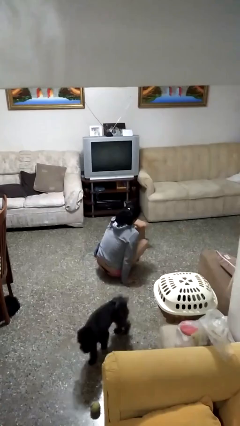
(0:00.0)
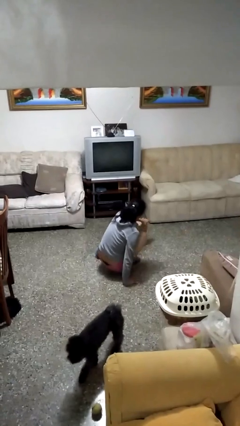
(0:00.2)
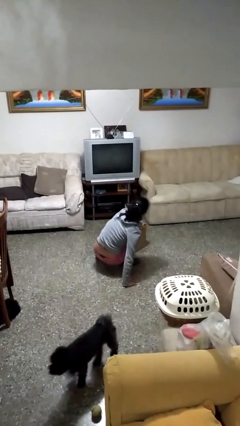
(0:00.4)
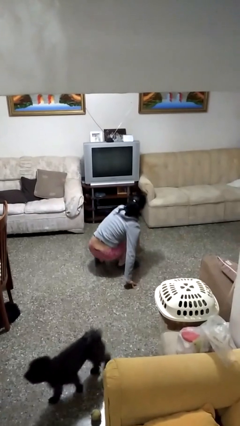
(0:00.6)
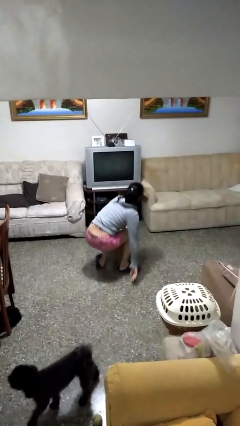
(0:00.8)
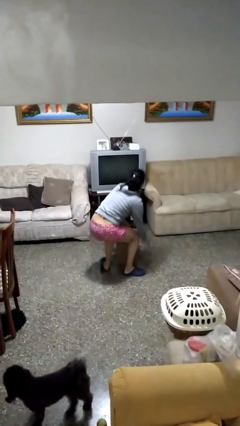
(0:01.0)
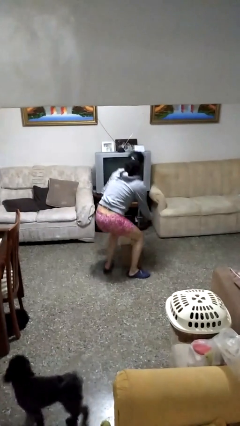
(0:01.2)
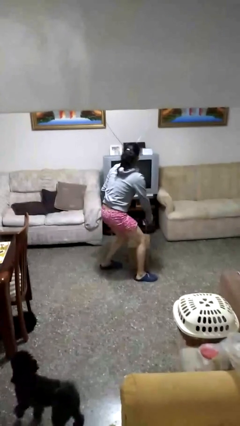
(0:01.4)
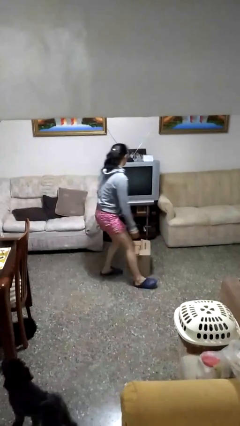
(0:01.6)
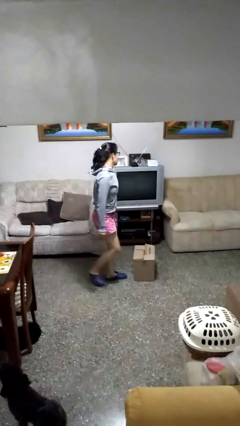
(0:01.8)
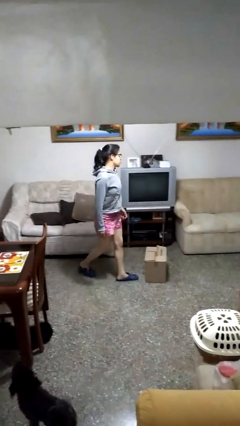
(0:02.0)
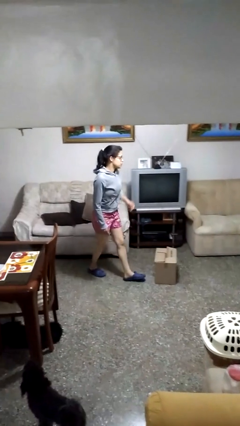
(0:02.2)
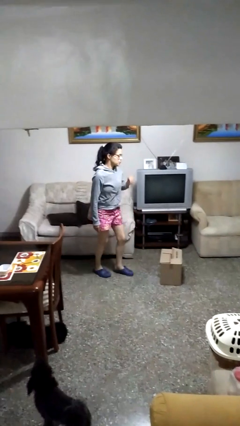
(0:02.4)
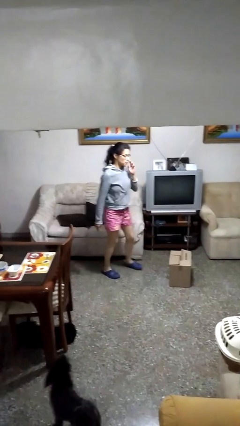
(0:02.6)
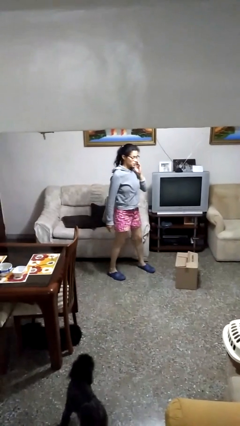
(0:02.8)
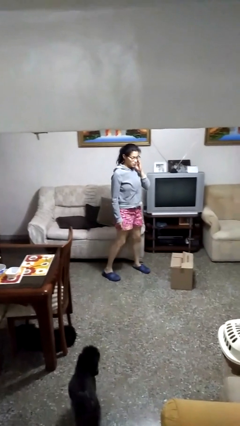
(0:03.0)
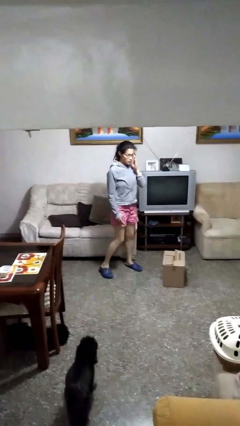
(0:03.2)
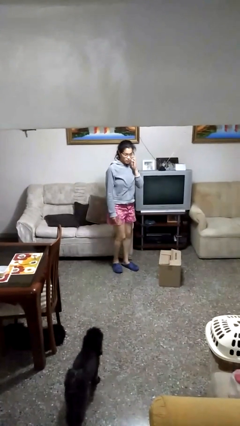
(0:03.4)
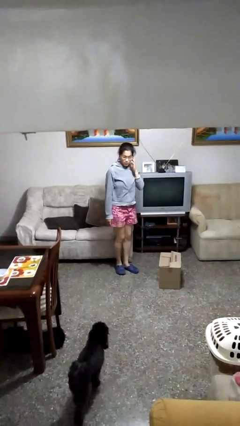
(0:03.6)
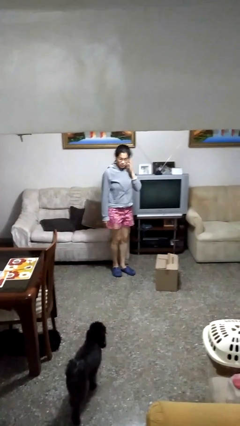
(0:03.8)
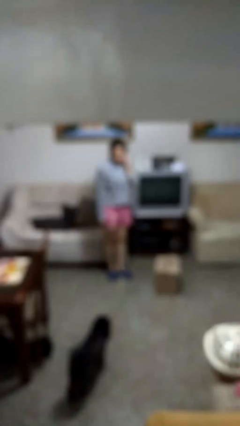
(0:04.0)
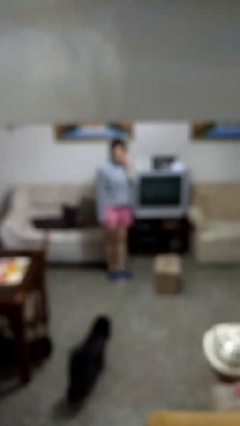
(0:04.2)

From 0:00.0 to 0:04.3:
person stands up from floor

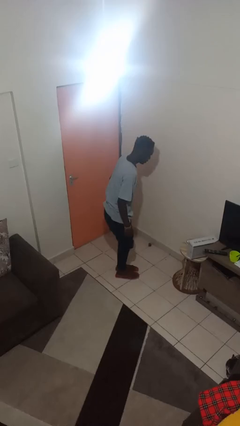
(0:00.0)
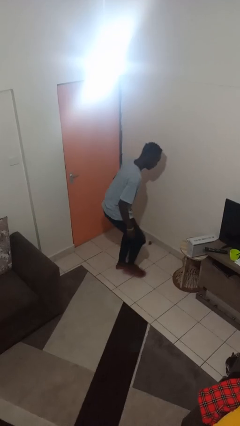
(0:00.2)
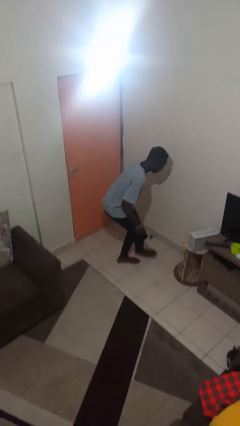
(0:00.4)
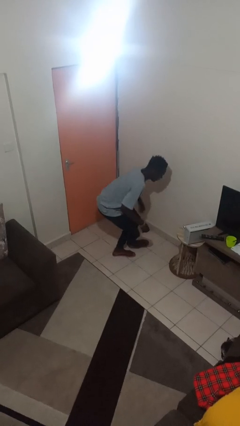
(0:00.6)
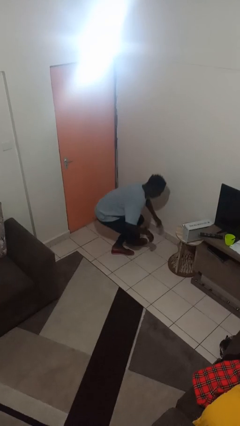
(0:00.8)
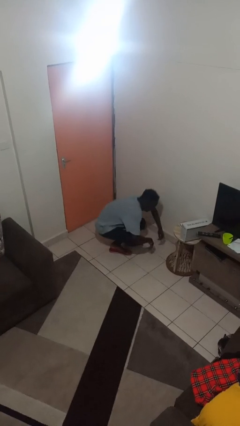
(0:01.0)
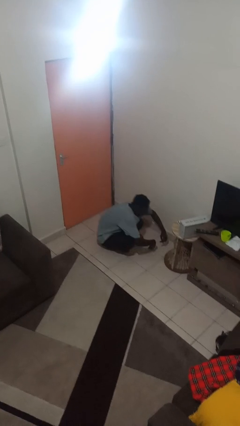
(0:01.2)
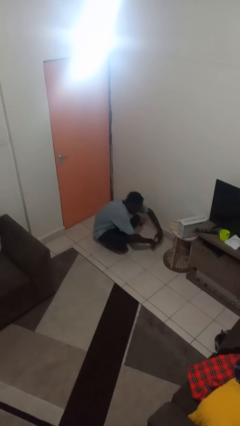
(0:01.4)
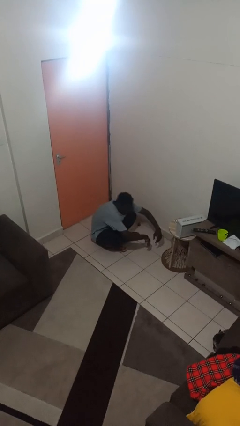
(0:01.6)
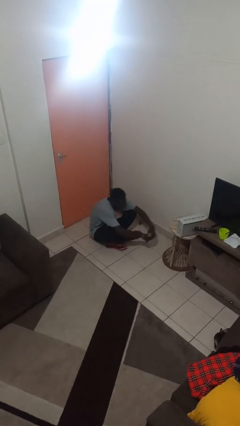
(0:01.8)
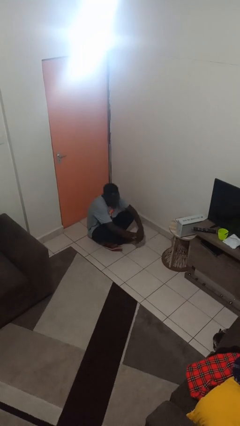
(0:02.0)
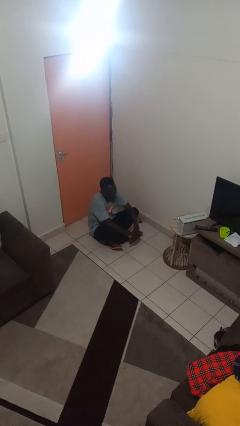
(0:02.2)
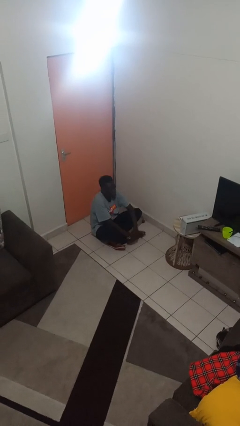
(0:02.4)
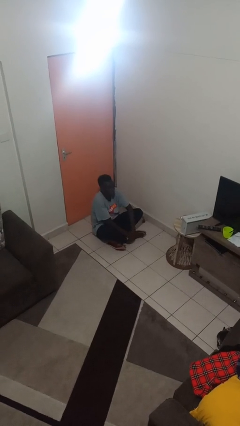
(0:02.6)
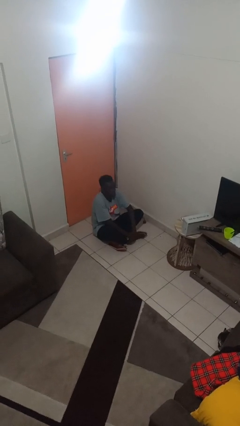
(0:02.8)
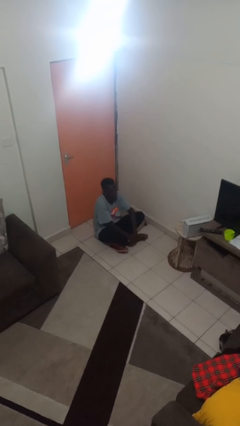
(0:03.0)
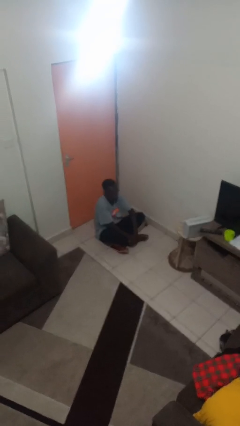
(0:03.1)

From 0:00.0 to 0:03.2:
person sits crisscross

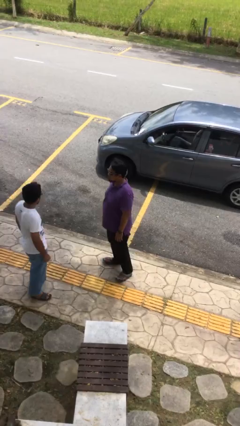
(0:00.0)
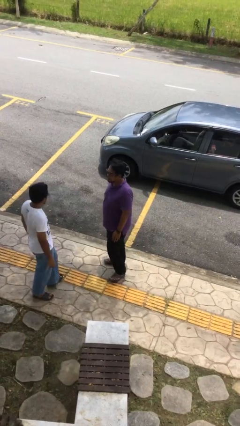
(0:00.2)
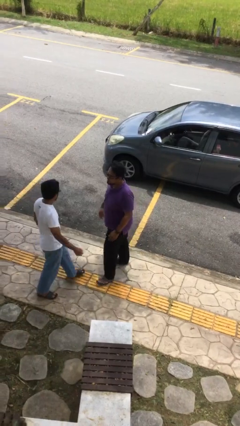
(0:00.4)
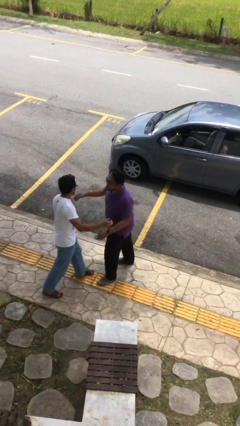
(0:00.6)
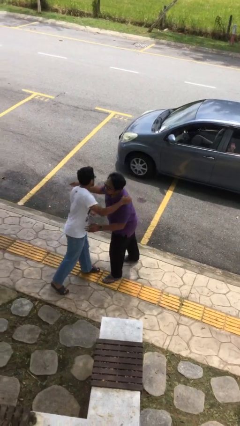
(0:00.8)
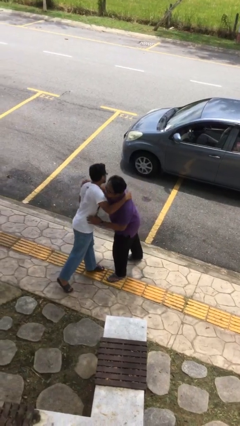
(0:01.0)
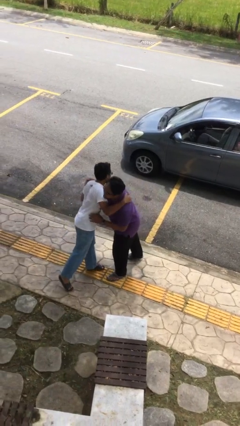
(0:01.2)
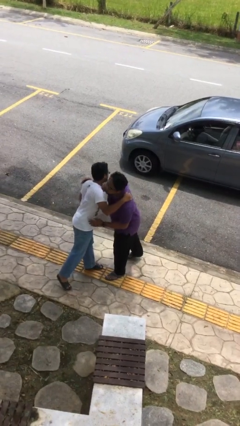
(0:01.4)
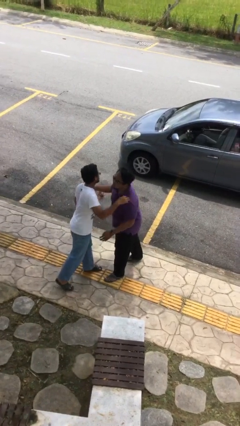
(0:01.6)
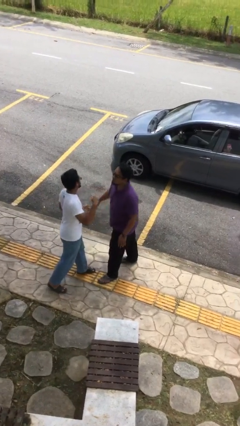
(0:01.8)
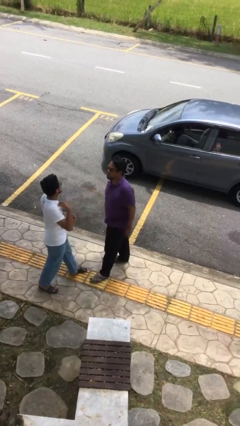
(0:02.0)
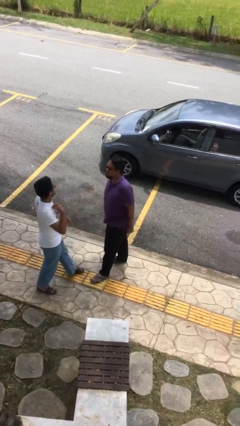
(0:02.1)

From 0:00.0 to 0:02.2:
person embraces person

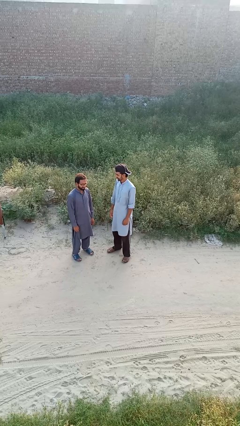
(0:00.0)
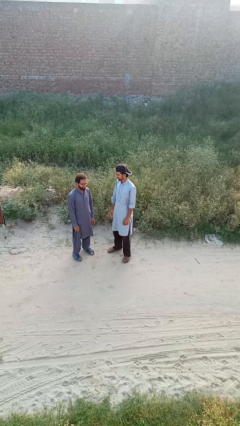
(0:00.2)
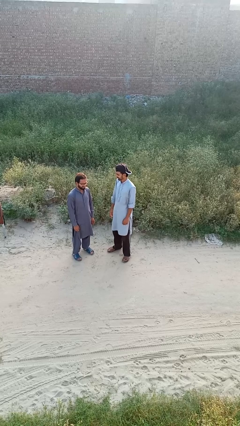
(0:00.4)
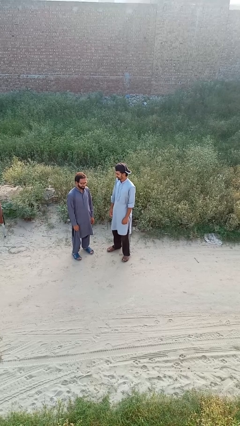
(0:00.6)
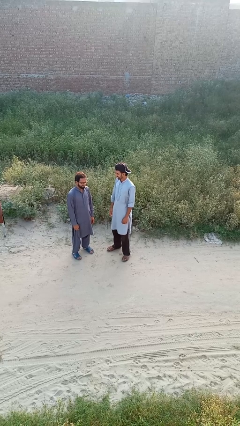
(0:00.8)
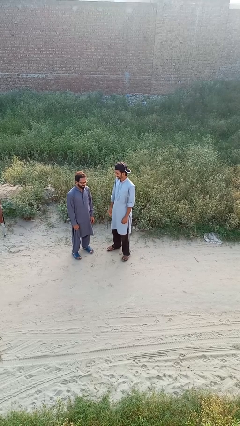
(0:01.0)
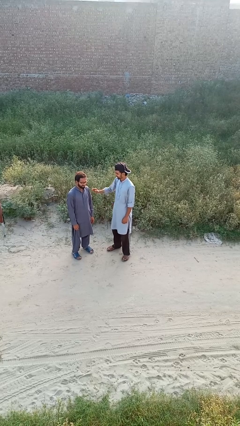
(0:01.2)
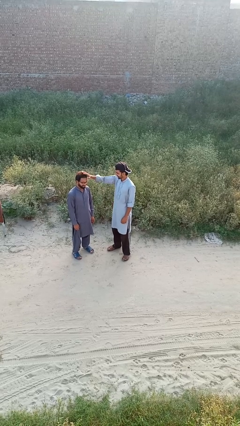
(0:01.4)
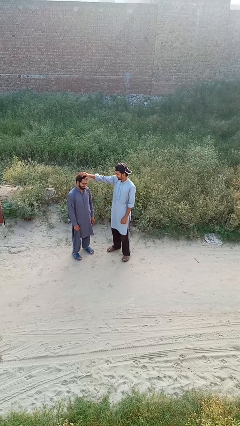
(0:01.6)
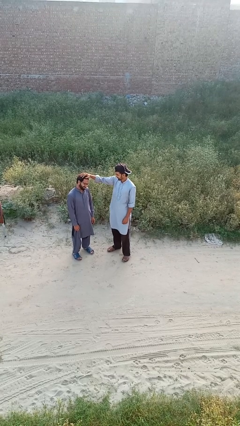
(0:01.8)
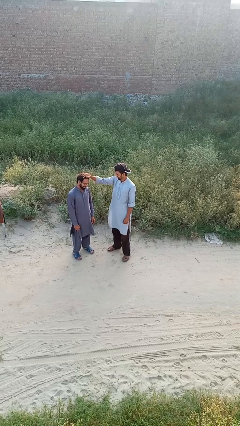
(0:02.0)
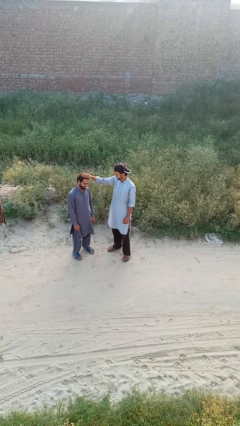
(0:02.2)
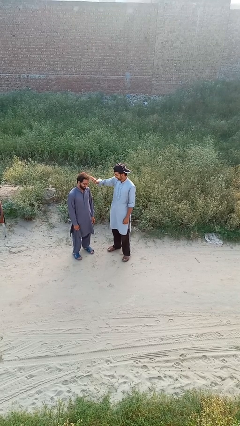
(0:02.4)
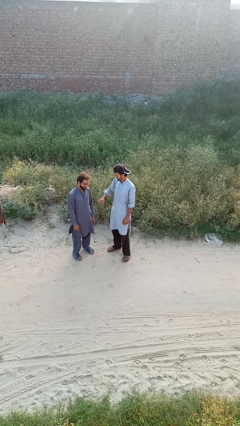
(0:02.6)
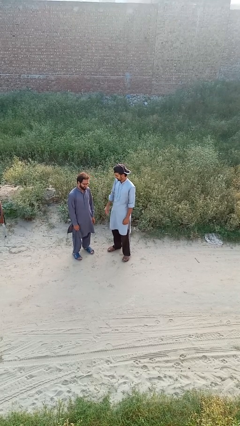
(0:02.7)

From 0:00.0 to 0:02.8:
person grabs person by hair

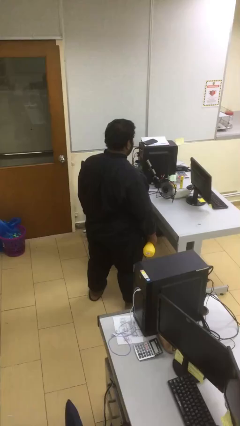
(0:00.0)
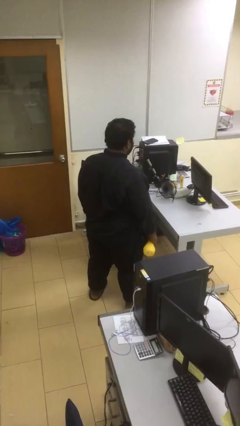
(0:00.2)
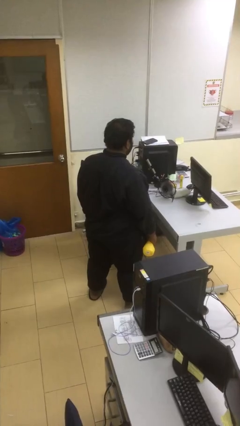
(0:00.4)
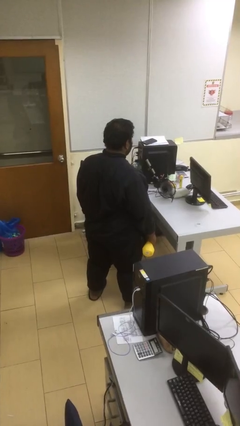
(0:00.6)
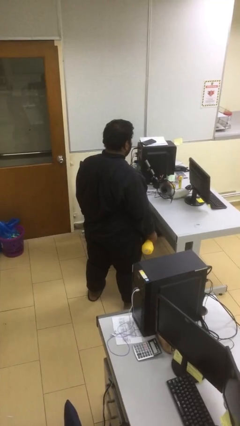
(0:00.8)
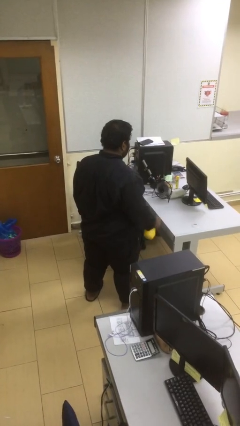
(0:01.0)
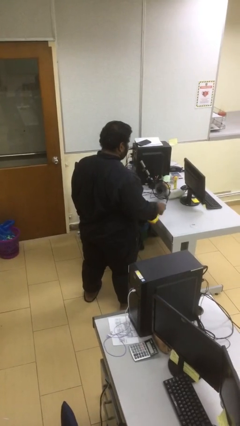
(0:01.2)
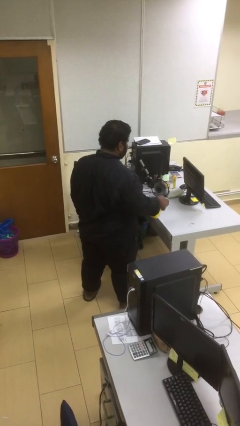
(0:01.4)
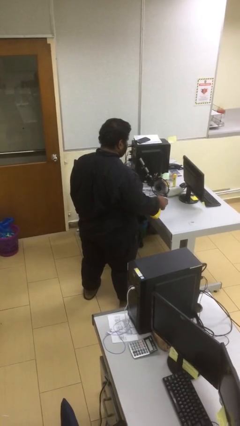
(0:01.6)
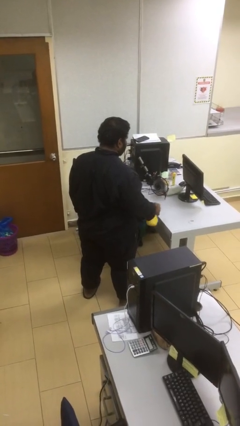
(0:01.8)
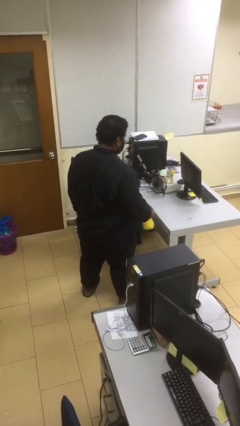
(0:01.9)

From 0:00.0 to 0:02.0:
person sprays from bottle

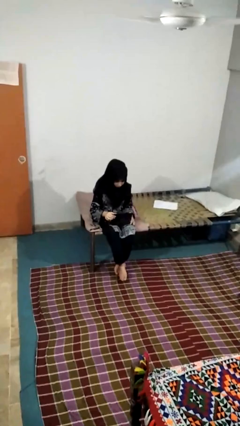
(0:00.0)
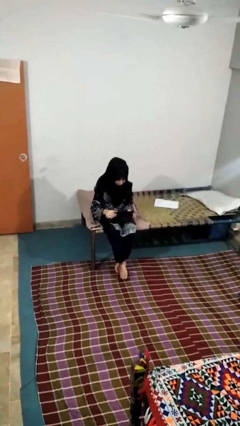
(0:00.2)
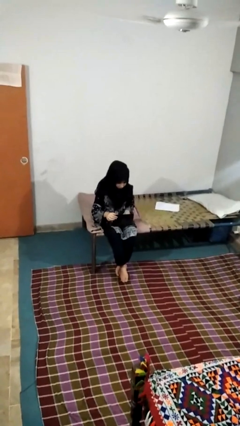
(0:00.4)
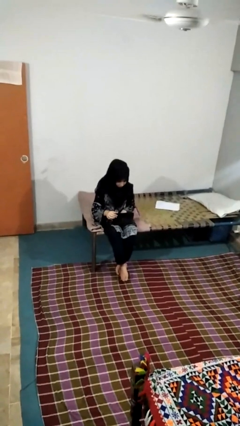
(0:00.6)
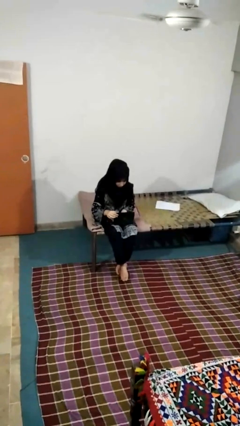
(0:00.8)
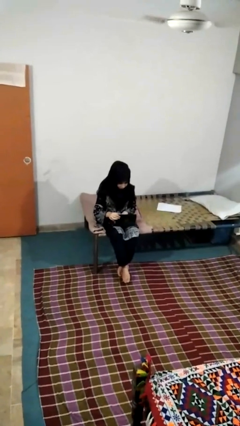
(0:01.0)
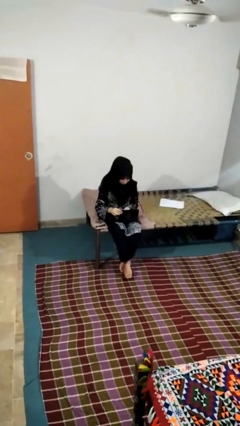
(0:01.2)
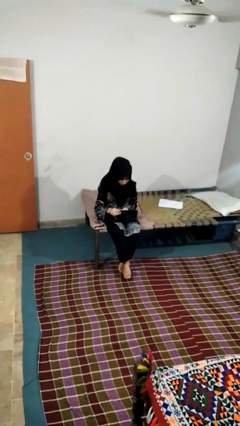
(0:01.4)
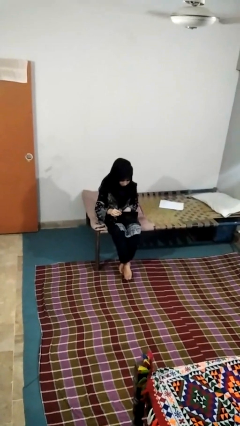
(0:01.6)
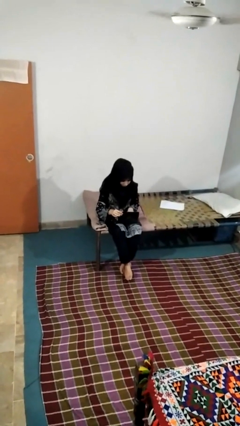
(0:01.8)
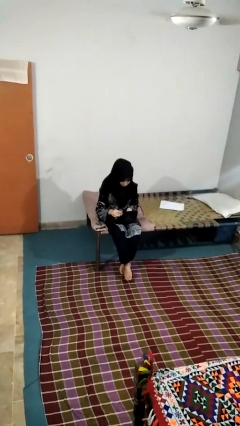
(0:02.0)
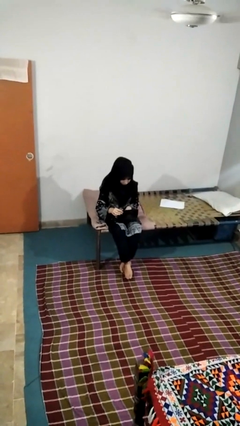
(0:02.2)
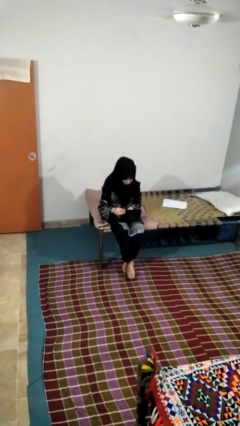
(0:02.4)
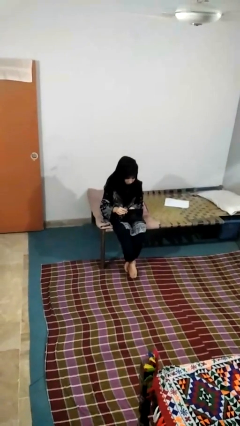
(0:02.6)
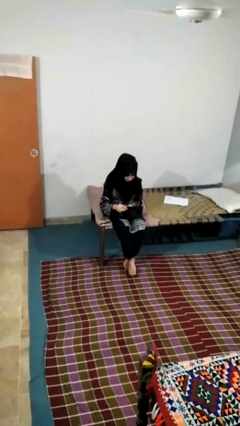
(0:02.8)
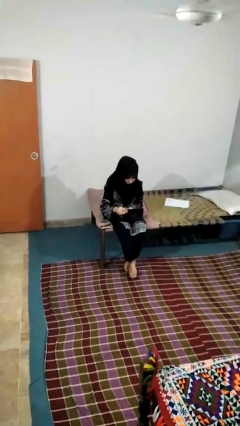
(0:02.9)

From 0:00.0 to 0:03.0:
person searches jewelry box
